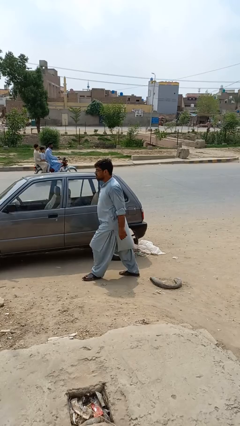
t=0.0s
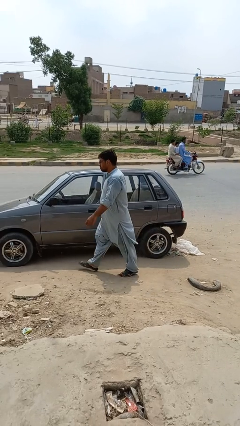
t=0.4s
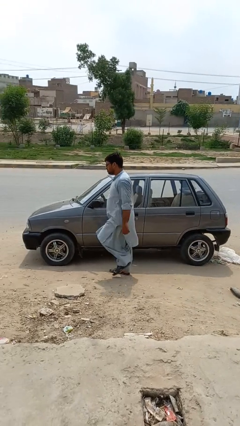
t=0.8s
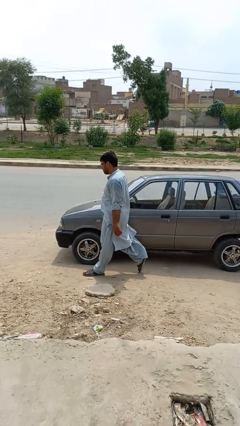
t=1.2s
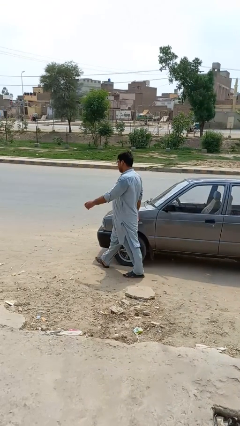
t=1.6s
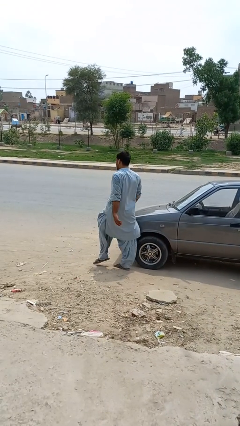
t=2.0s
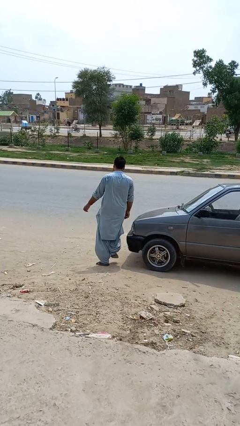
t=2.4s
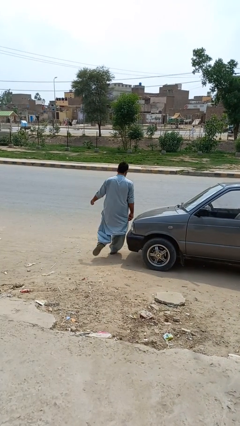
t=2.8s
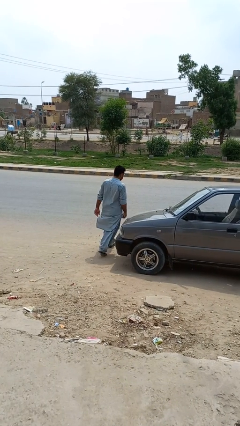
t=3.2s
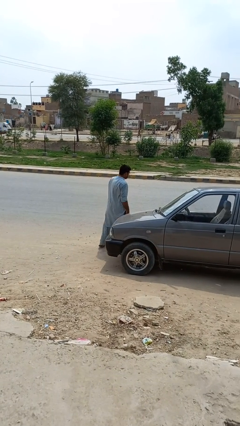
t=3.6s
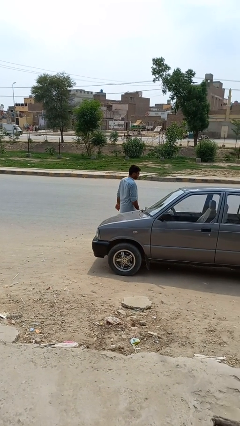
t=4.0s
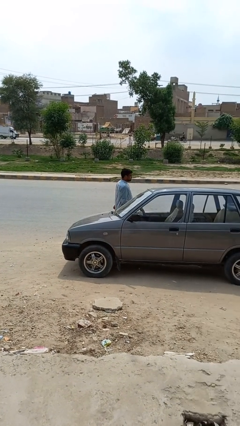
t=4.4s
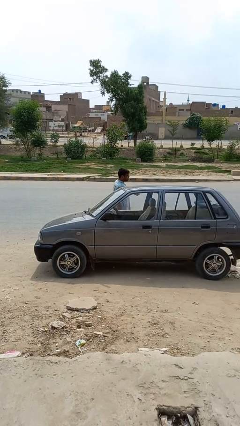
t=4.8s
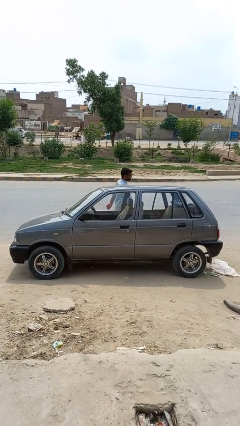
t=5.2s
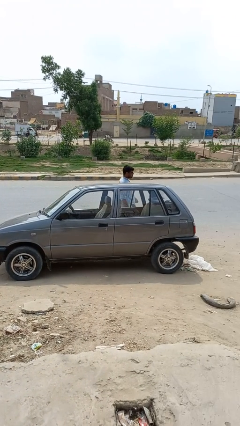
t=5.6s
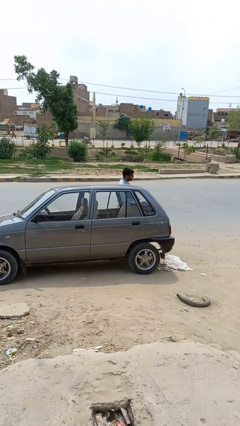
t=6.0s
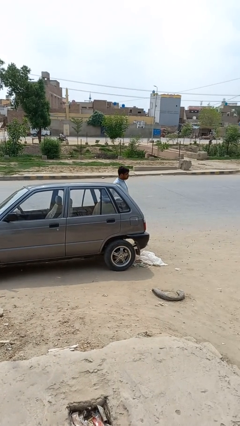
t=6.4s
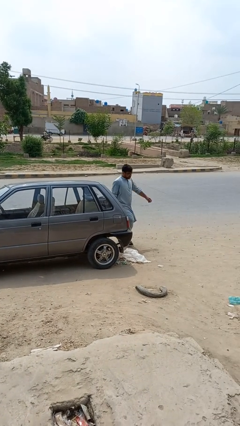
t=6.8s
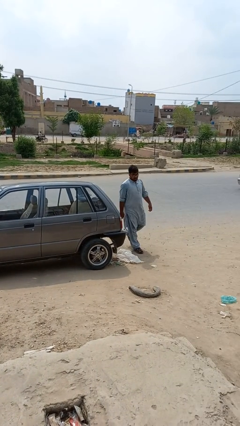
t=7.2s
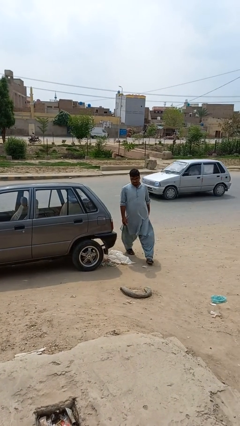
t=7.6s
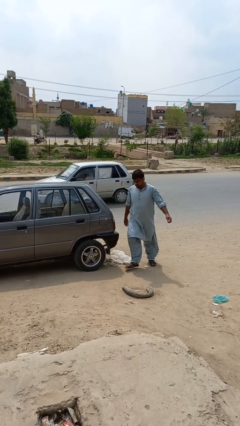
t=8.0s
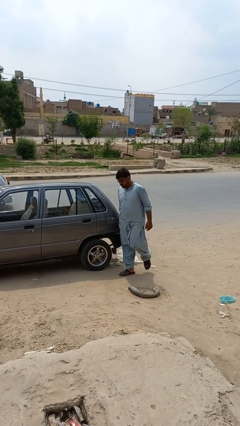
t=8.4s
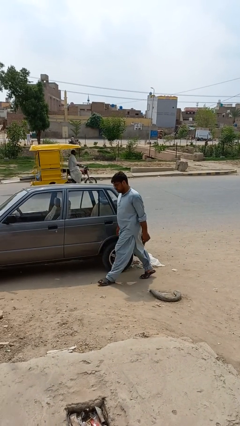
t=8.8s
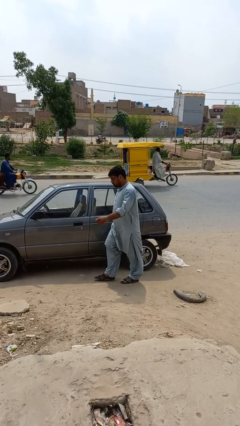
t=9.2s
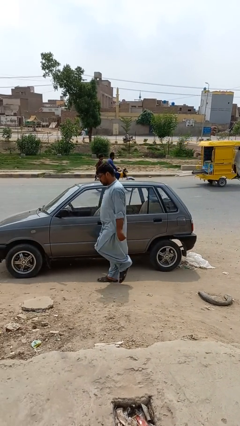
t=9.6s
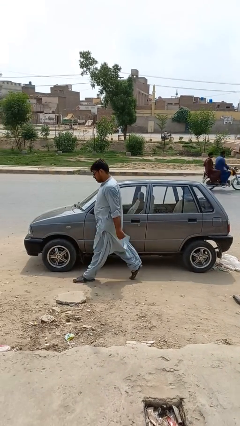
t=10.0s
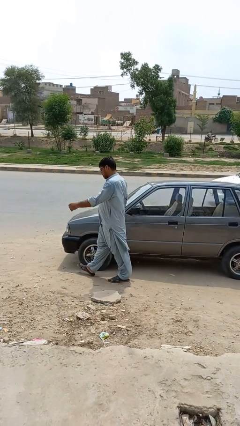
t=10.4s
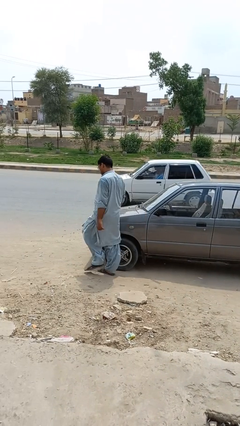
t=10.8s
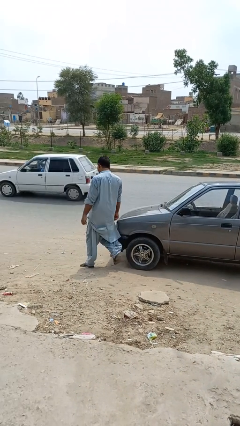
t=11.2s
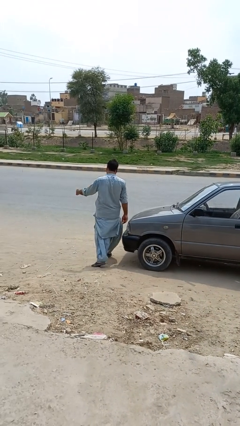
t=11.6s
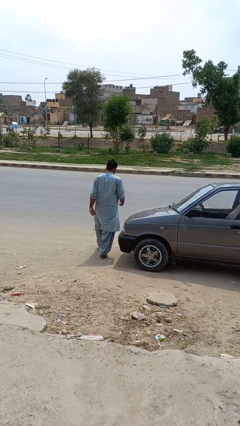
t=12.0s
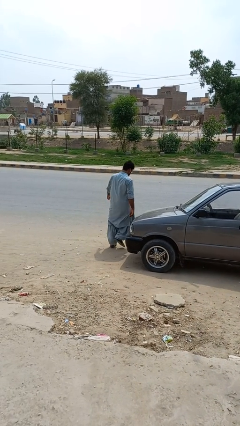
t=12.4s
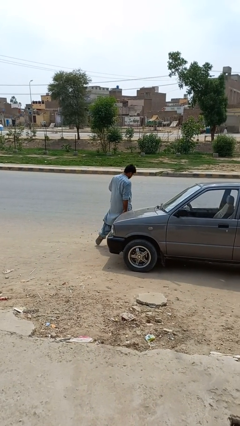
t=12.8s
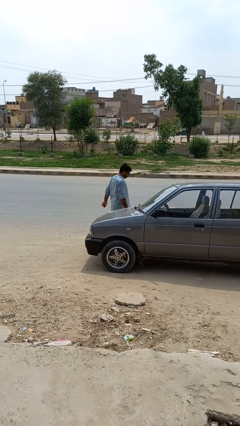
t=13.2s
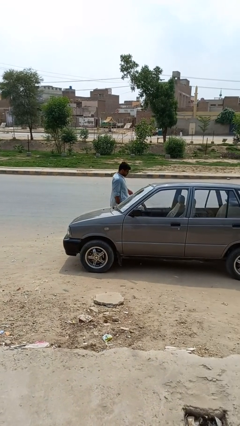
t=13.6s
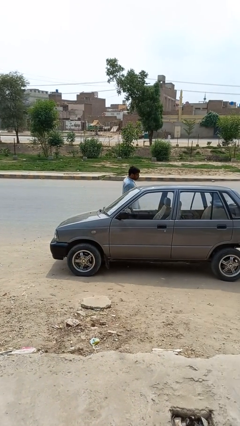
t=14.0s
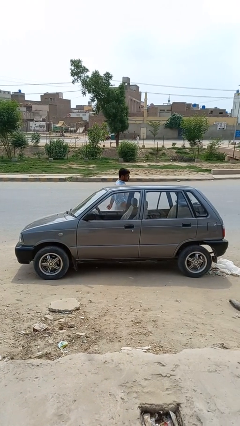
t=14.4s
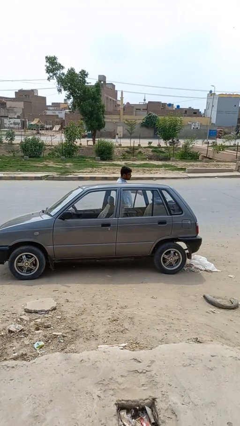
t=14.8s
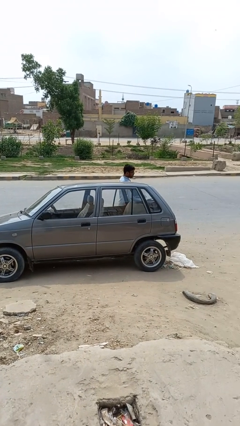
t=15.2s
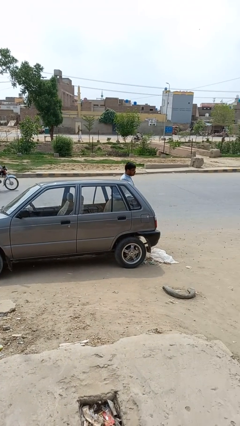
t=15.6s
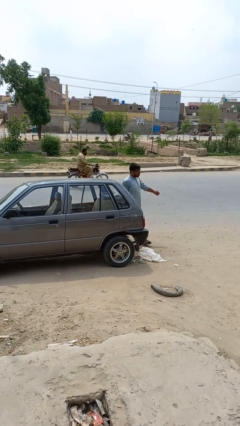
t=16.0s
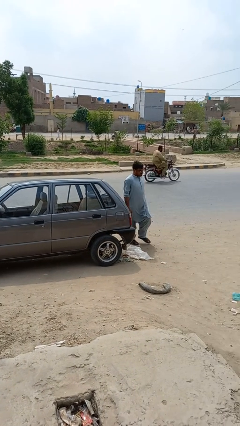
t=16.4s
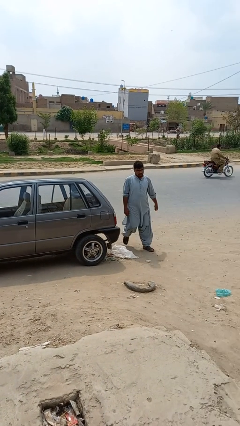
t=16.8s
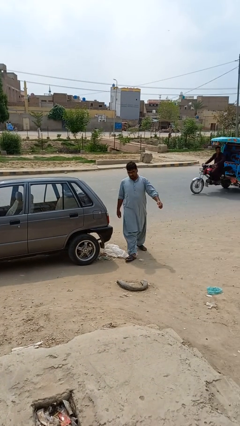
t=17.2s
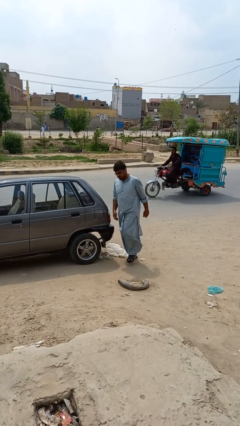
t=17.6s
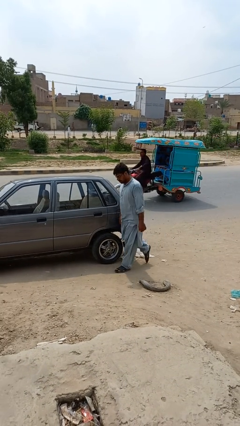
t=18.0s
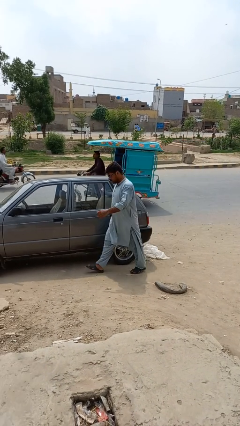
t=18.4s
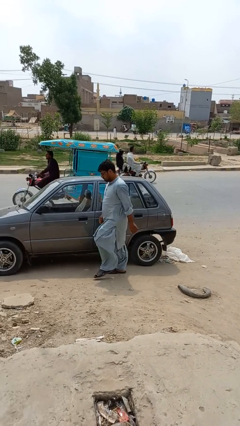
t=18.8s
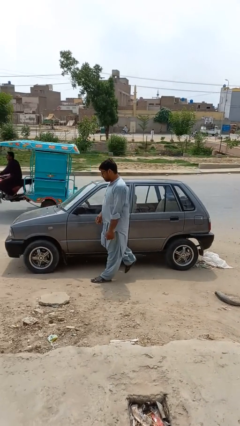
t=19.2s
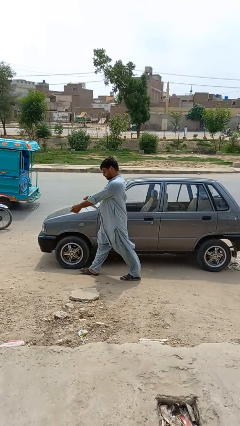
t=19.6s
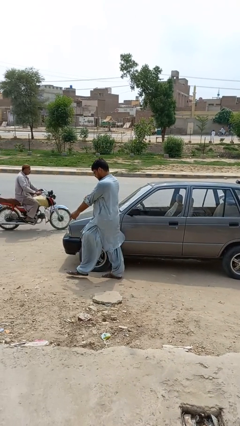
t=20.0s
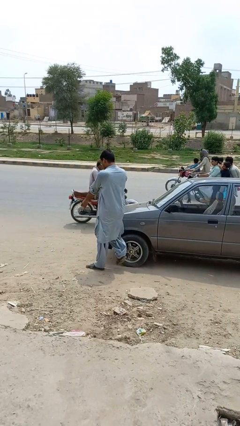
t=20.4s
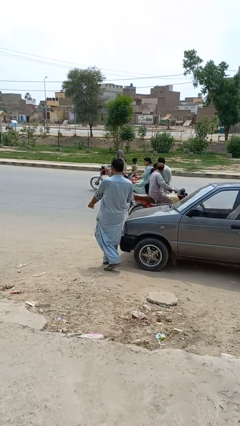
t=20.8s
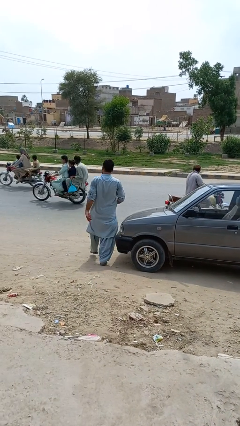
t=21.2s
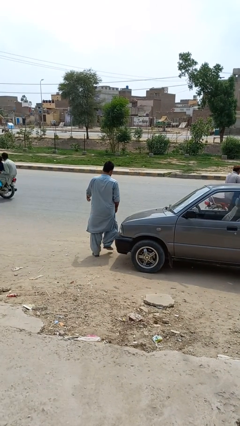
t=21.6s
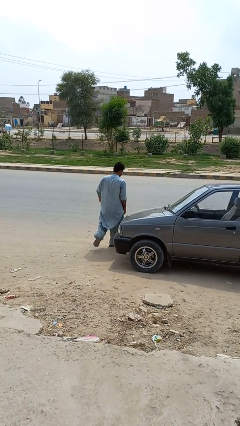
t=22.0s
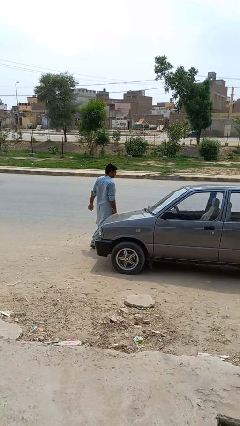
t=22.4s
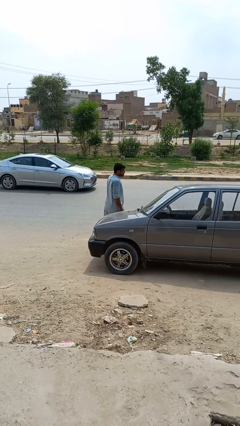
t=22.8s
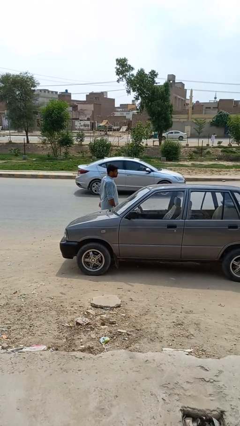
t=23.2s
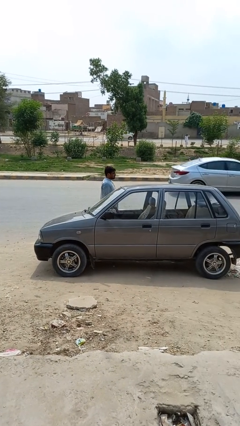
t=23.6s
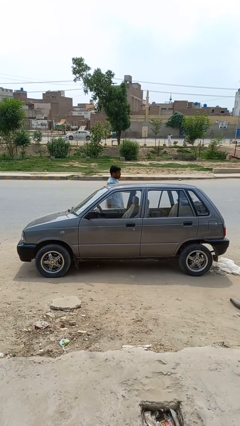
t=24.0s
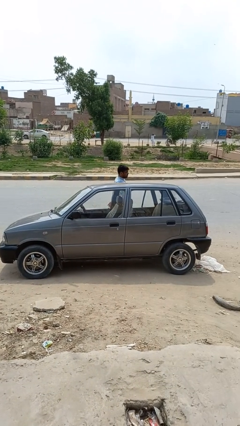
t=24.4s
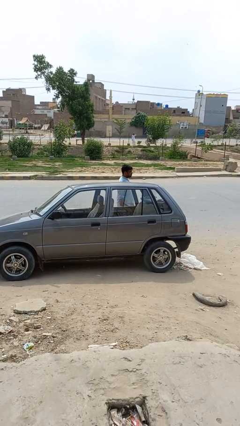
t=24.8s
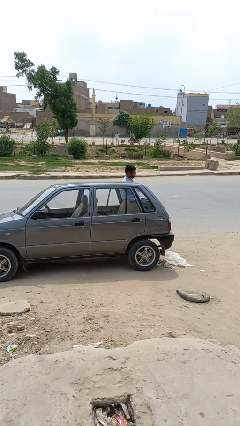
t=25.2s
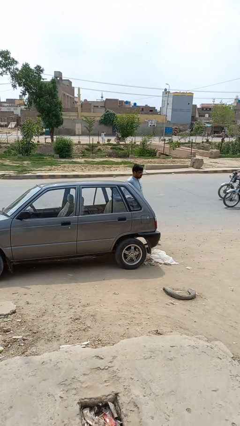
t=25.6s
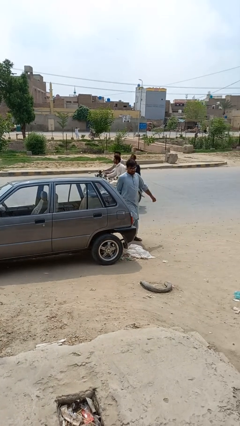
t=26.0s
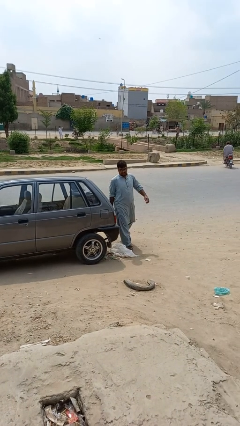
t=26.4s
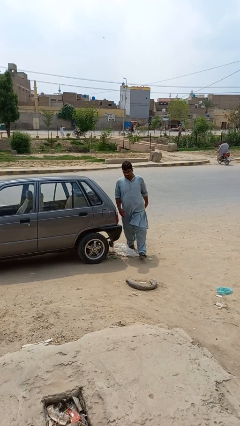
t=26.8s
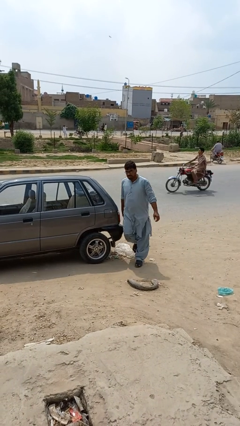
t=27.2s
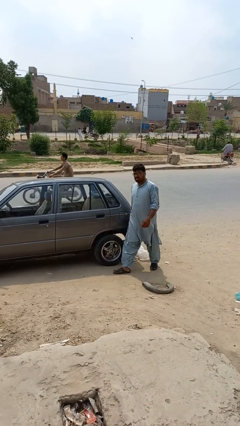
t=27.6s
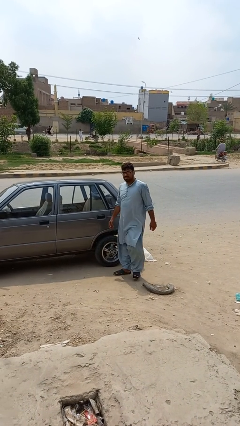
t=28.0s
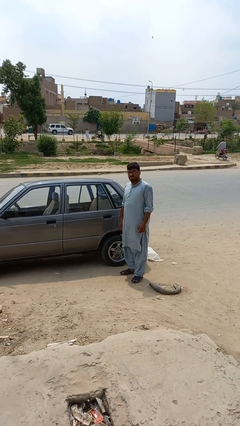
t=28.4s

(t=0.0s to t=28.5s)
person walks around car

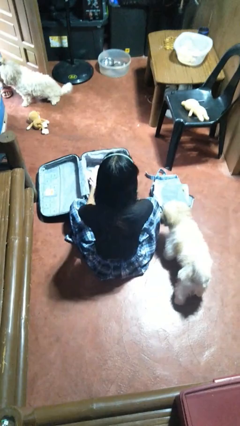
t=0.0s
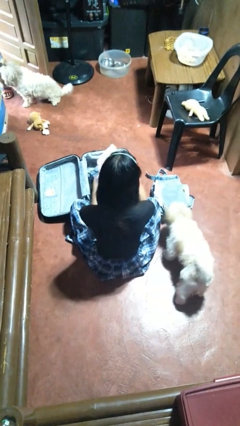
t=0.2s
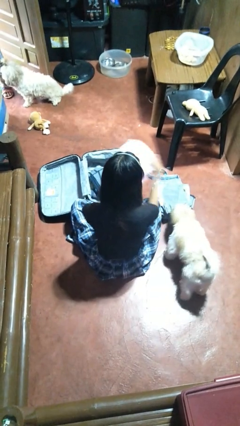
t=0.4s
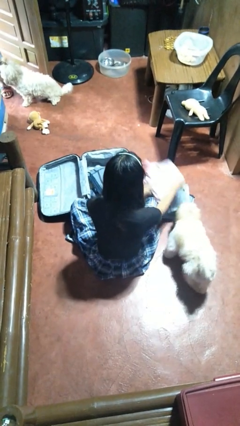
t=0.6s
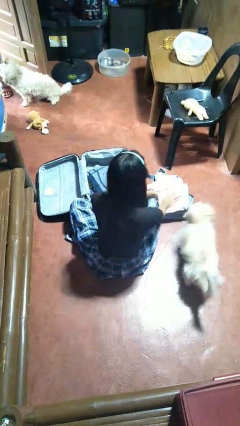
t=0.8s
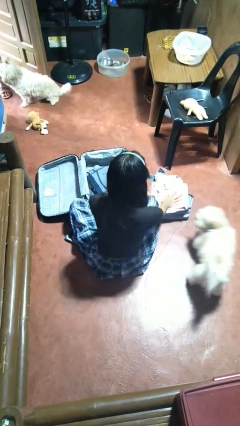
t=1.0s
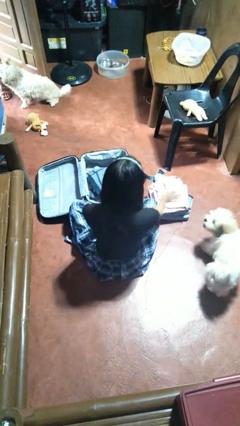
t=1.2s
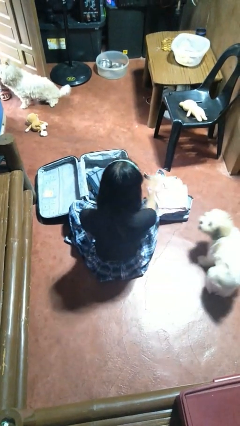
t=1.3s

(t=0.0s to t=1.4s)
person unloads clothes from suitcase

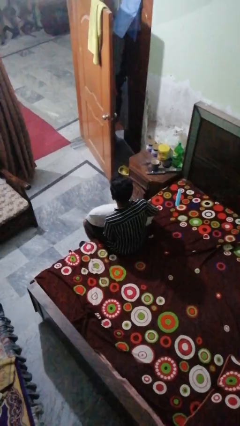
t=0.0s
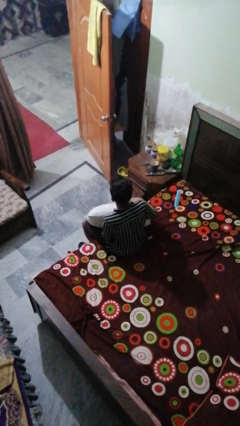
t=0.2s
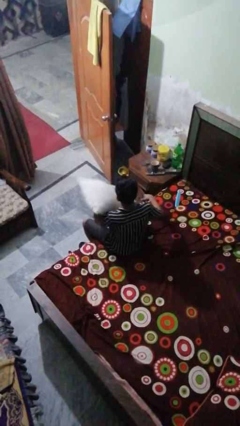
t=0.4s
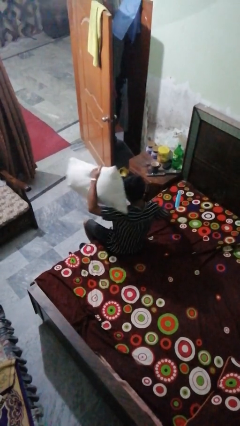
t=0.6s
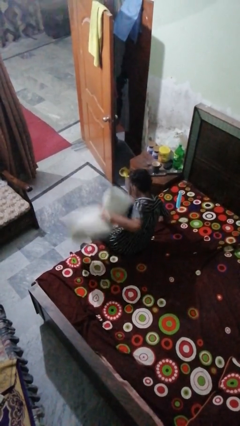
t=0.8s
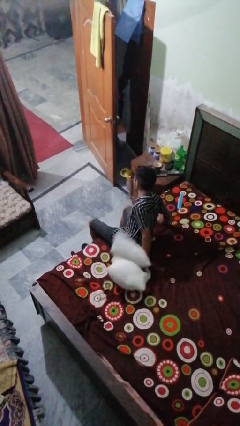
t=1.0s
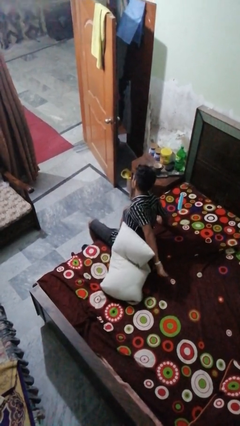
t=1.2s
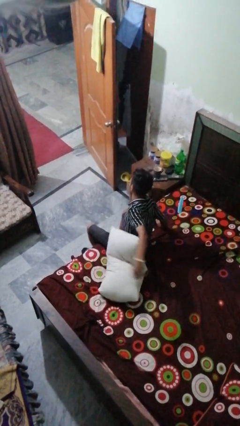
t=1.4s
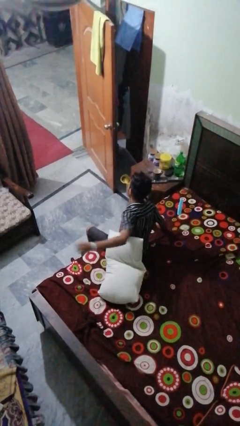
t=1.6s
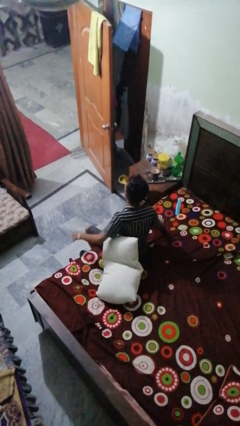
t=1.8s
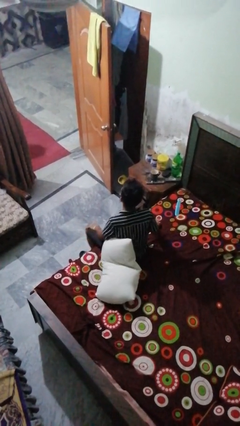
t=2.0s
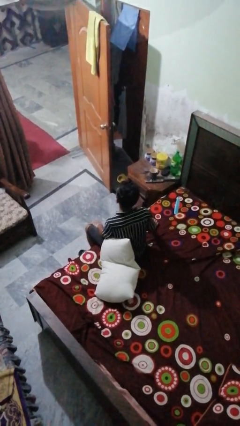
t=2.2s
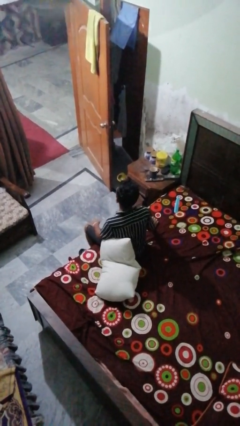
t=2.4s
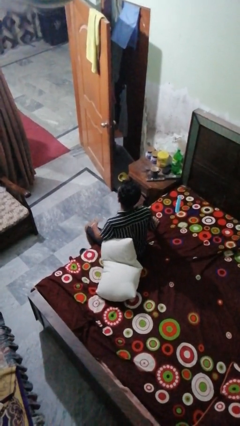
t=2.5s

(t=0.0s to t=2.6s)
person throws object on bed
